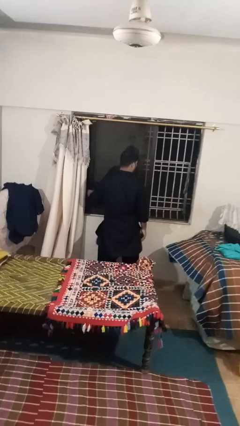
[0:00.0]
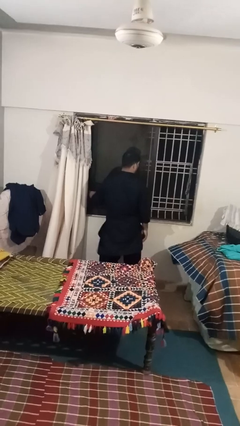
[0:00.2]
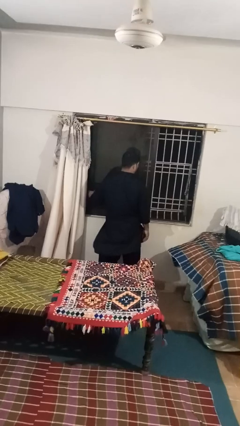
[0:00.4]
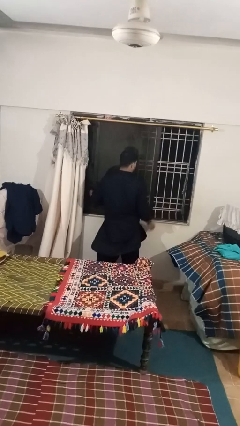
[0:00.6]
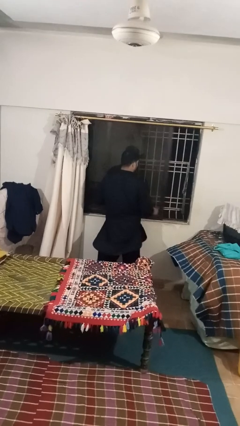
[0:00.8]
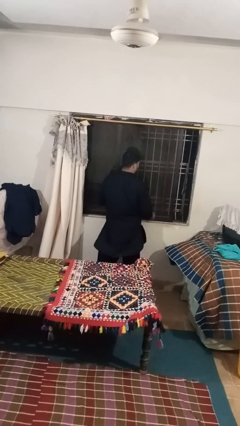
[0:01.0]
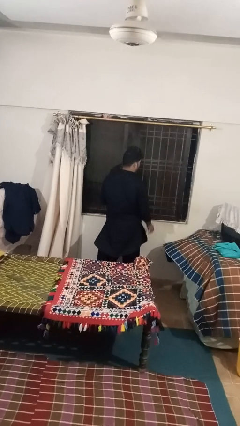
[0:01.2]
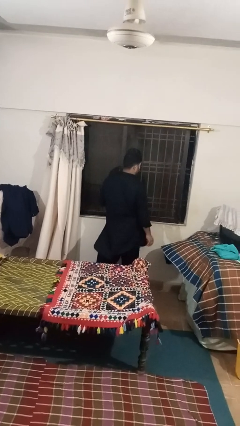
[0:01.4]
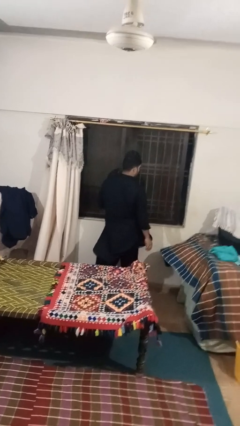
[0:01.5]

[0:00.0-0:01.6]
person closes sliding door

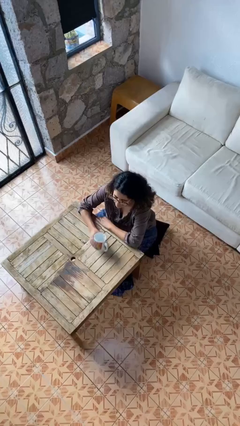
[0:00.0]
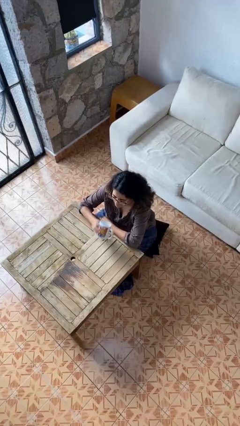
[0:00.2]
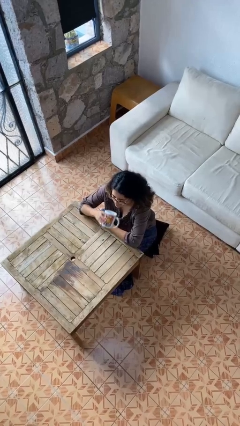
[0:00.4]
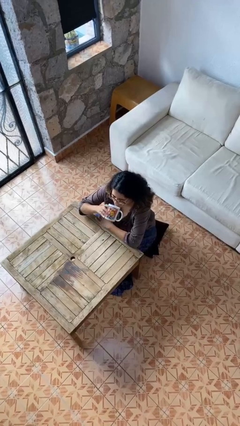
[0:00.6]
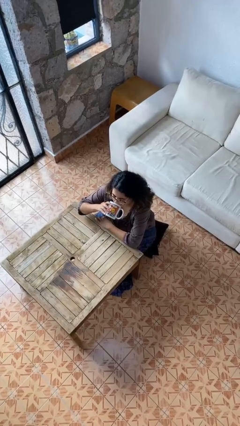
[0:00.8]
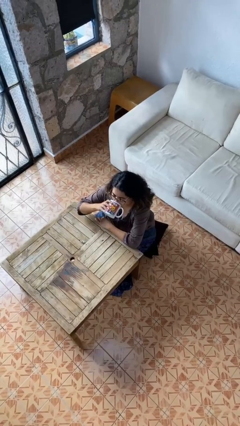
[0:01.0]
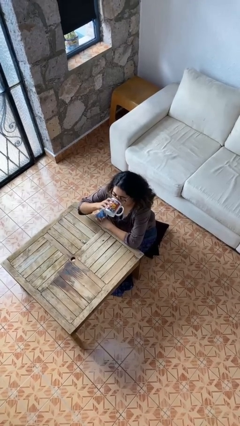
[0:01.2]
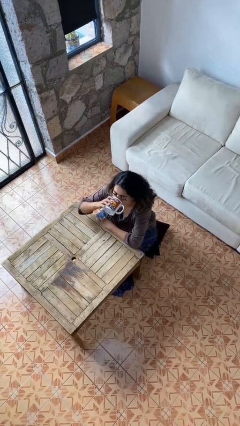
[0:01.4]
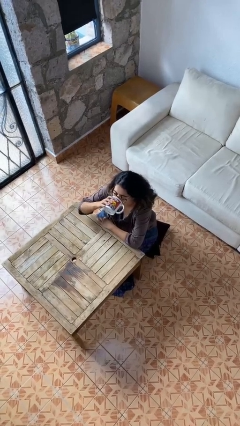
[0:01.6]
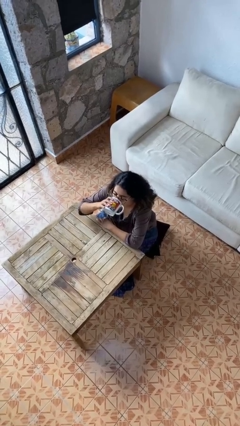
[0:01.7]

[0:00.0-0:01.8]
person drinks from mug

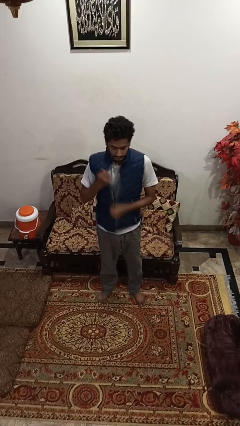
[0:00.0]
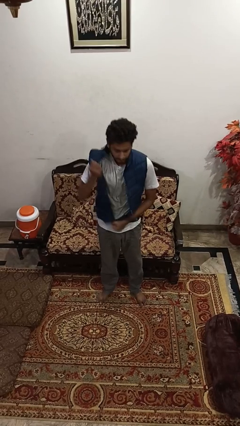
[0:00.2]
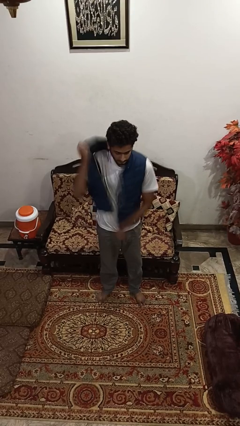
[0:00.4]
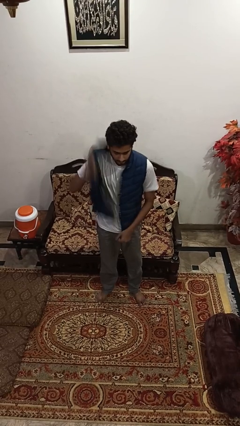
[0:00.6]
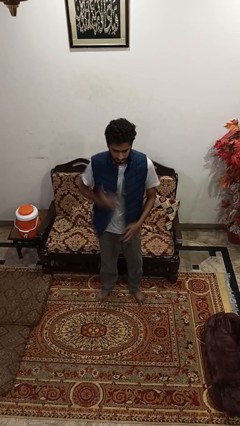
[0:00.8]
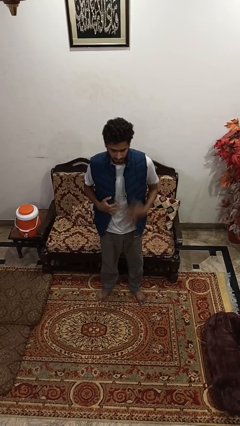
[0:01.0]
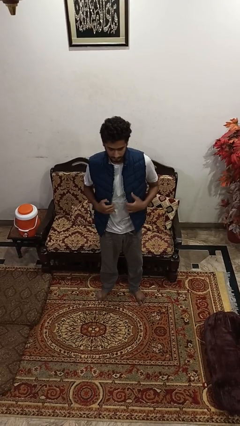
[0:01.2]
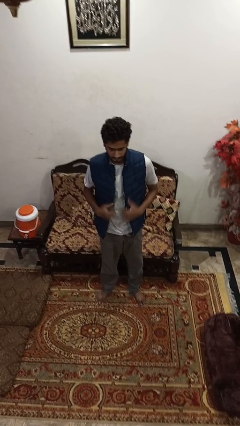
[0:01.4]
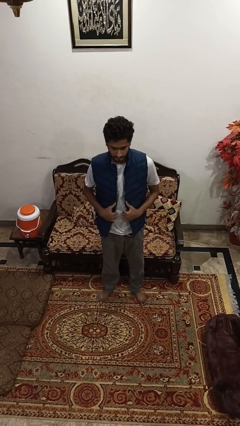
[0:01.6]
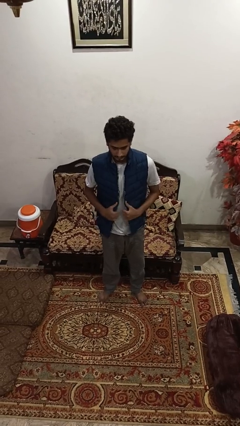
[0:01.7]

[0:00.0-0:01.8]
person unzips jacket

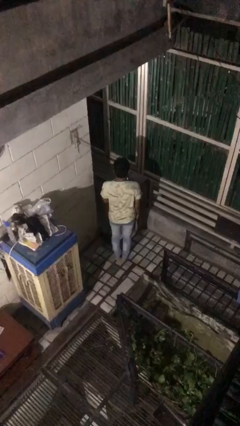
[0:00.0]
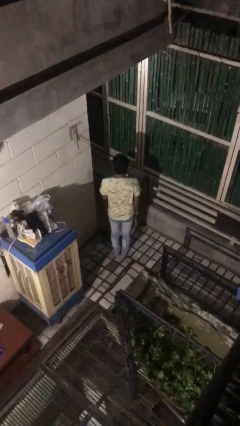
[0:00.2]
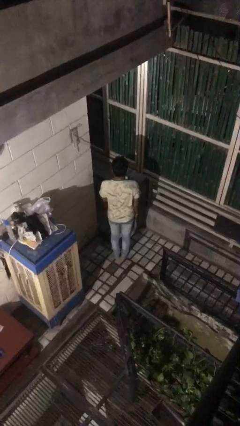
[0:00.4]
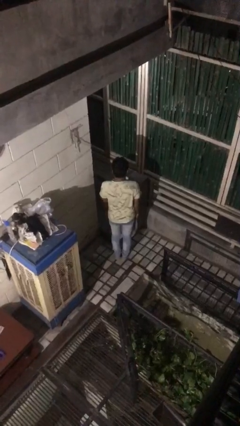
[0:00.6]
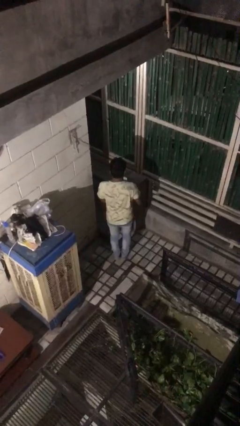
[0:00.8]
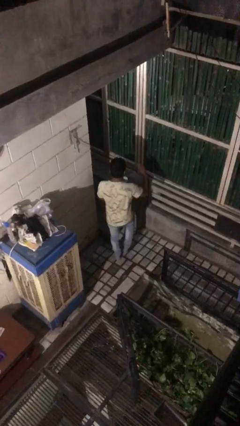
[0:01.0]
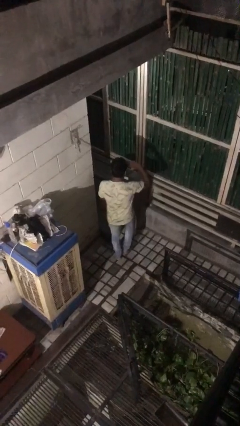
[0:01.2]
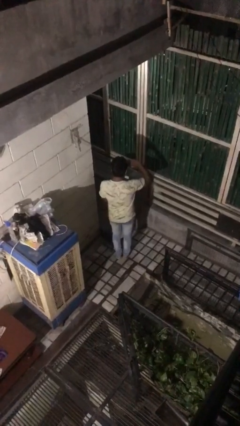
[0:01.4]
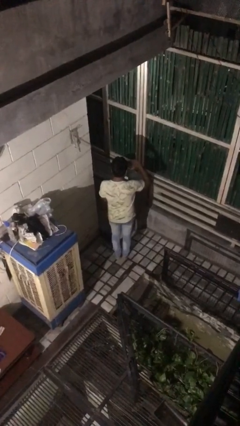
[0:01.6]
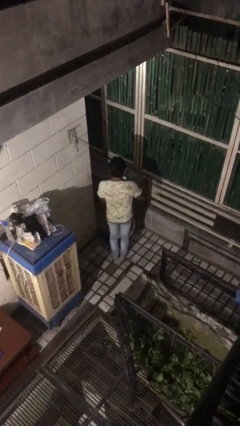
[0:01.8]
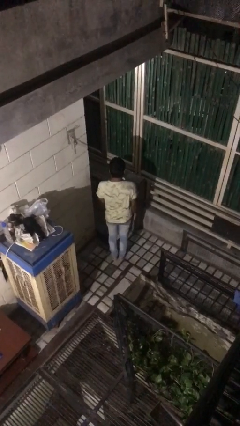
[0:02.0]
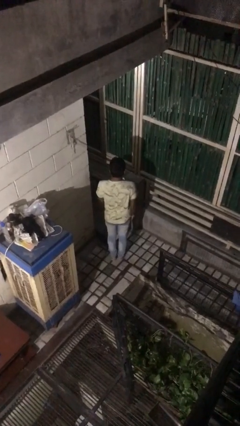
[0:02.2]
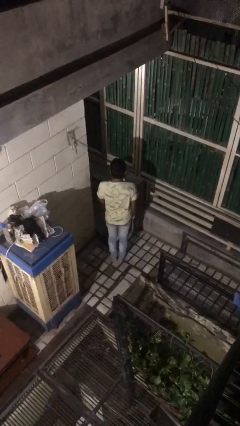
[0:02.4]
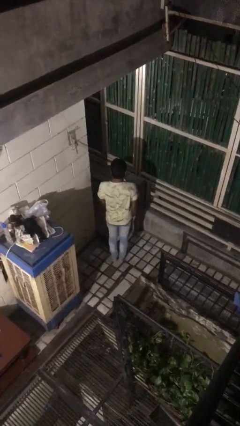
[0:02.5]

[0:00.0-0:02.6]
person salutes

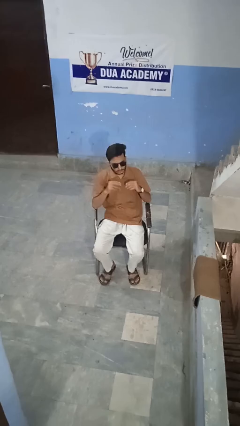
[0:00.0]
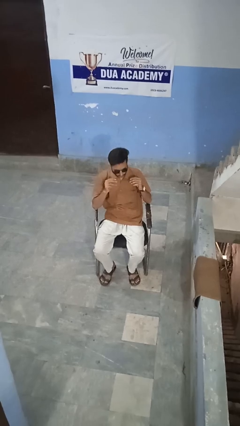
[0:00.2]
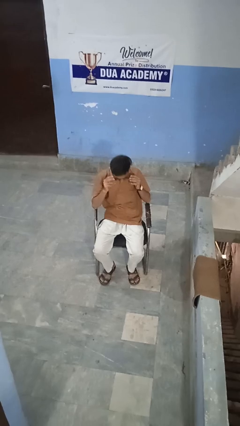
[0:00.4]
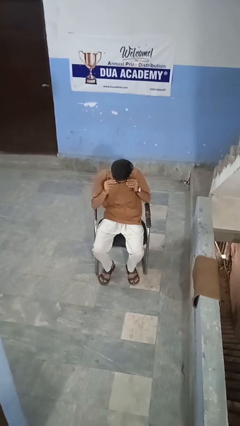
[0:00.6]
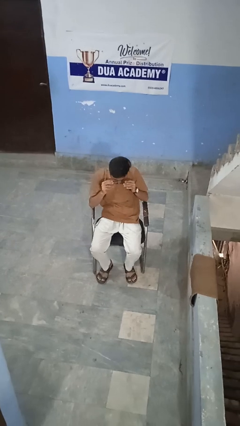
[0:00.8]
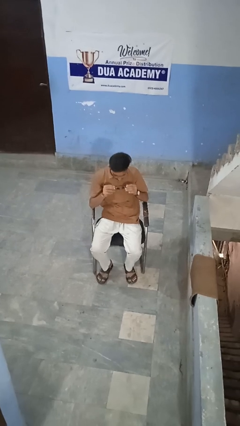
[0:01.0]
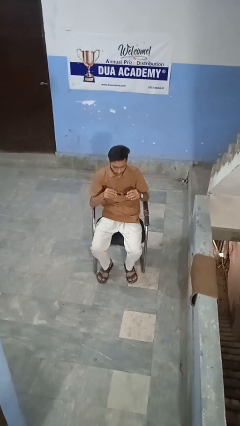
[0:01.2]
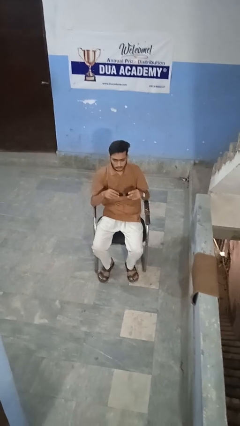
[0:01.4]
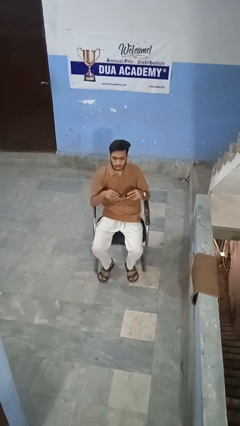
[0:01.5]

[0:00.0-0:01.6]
person takes off sunglasses

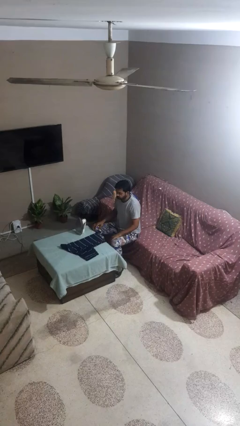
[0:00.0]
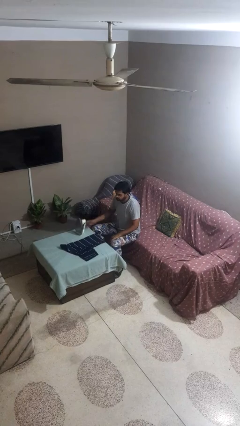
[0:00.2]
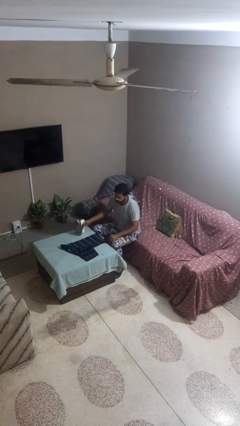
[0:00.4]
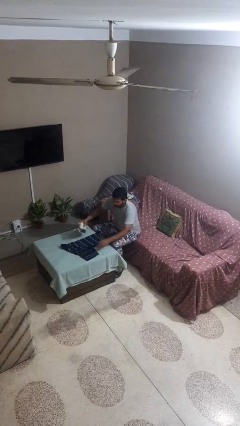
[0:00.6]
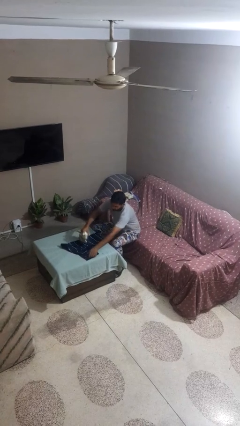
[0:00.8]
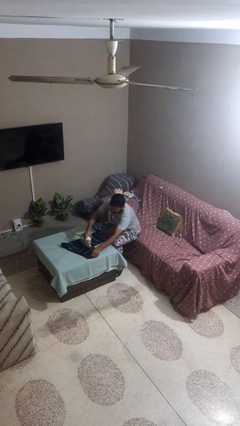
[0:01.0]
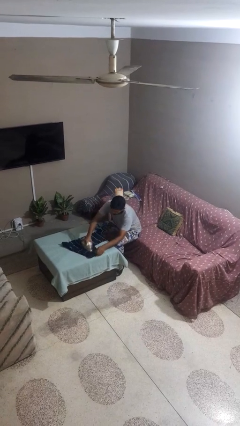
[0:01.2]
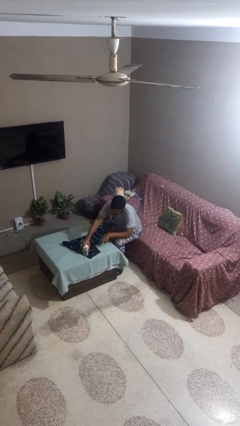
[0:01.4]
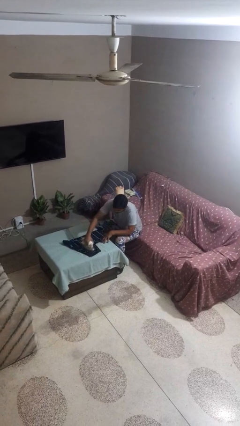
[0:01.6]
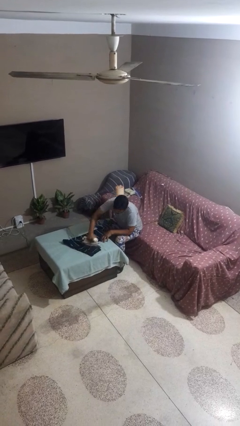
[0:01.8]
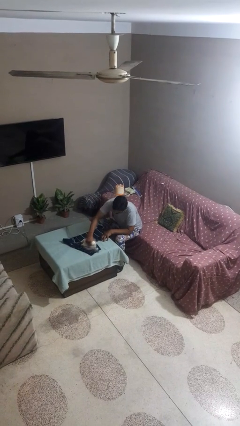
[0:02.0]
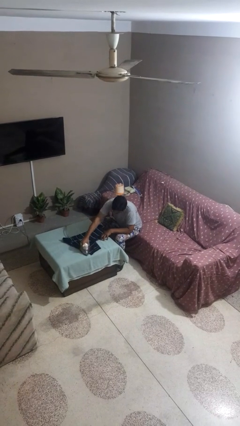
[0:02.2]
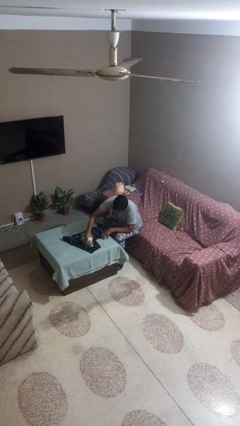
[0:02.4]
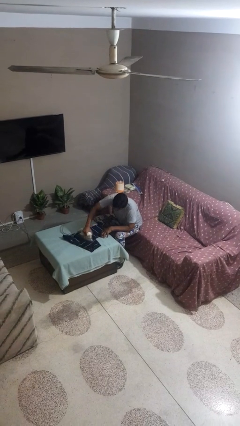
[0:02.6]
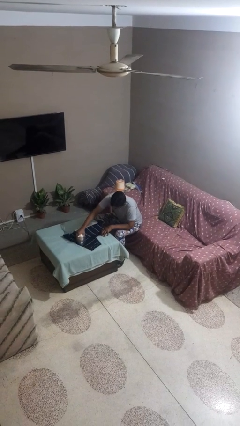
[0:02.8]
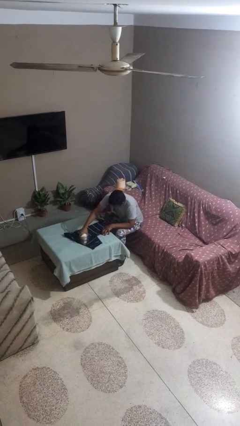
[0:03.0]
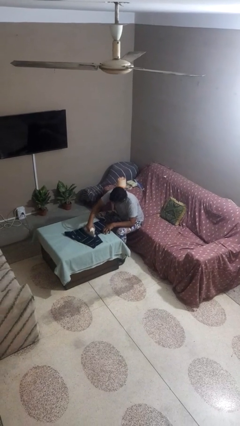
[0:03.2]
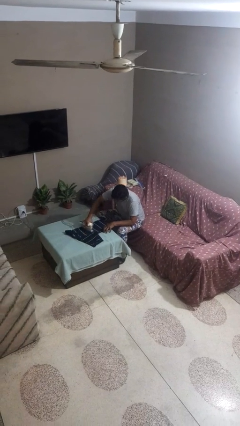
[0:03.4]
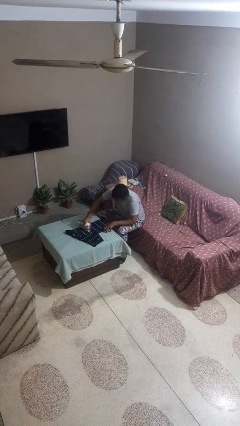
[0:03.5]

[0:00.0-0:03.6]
person irons clothes

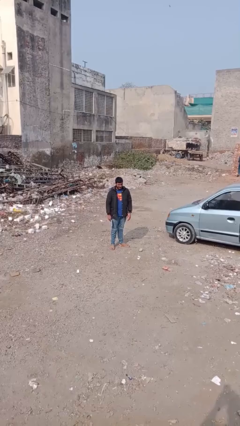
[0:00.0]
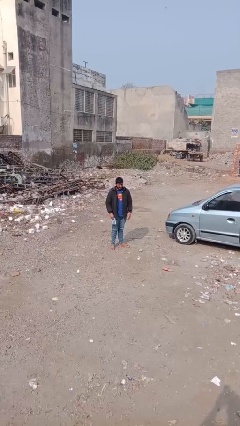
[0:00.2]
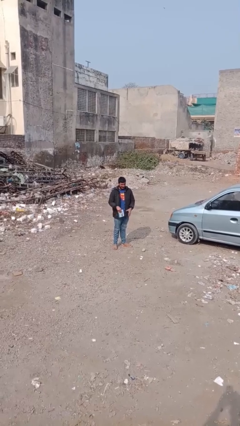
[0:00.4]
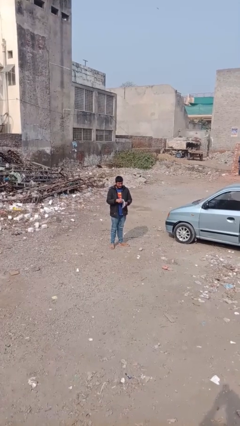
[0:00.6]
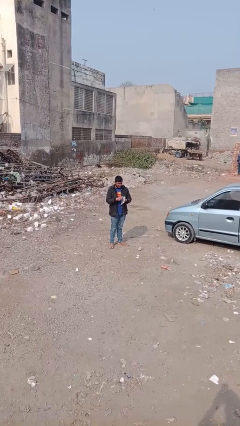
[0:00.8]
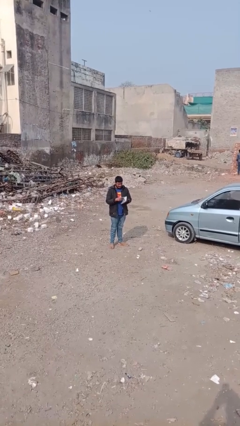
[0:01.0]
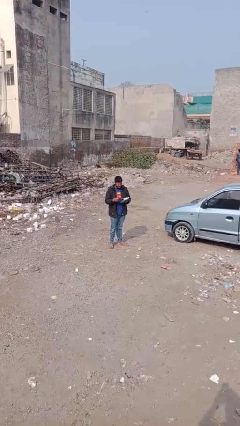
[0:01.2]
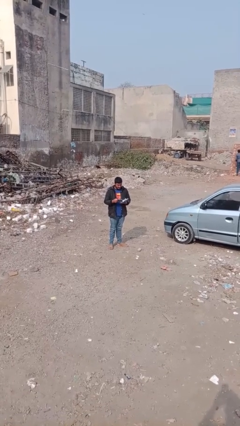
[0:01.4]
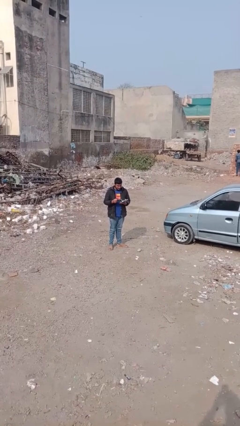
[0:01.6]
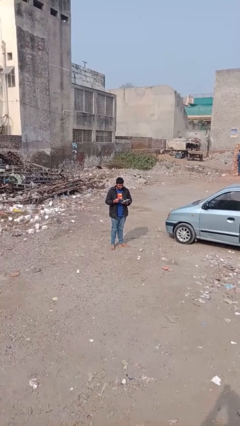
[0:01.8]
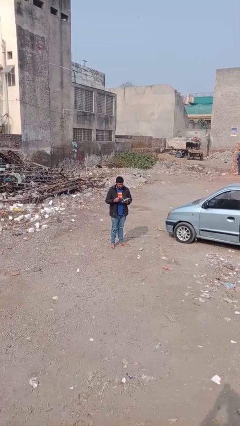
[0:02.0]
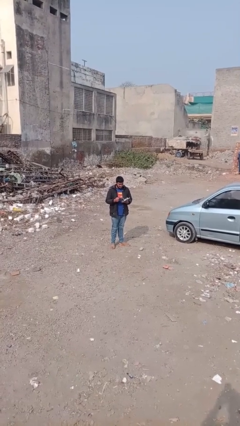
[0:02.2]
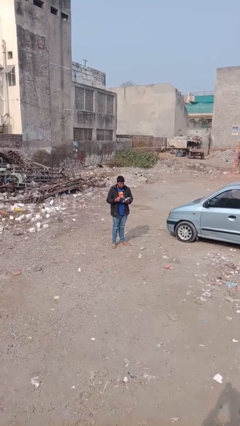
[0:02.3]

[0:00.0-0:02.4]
person reads document

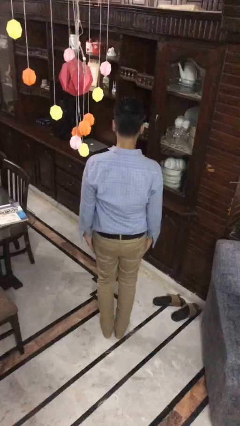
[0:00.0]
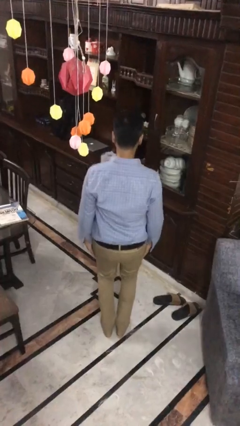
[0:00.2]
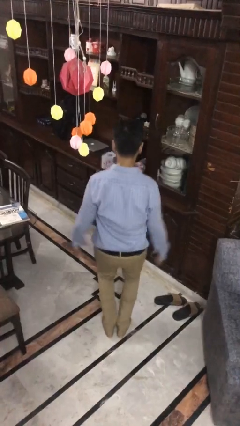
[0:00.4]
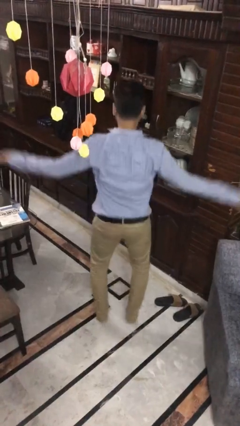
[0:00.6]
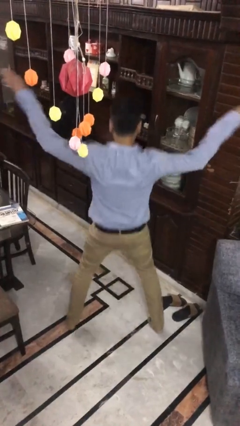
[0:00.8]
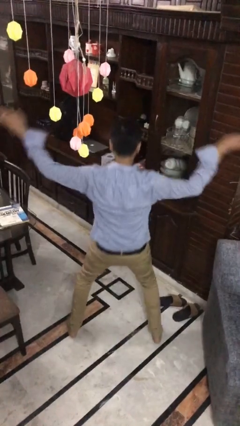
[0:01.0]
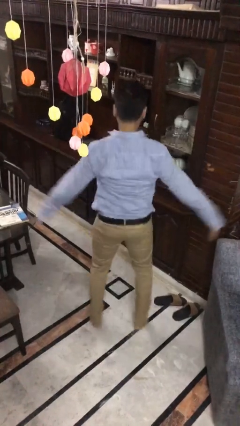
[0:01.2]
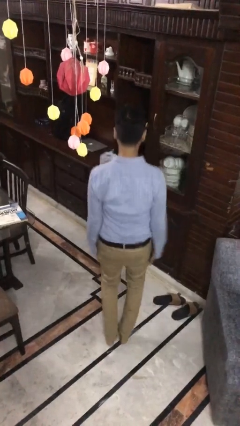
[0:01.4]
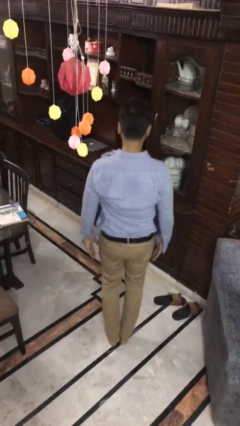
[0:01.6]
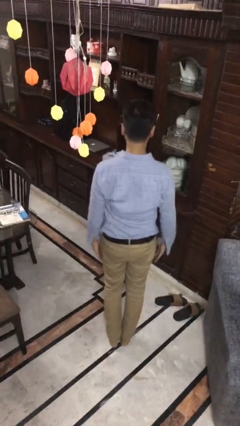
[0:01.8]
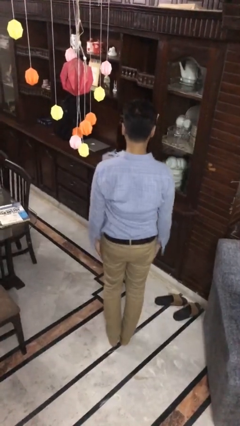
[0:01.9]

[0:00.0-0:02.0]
person exercises with jumping jacks
